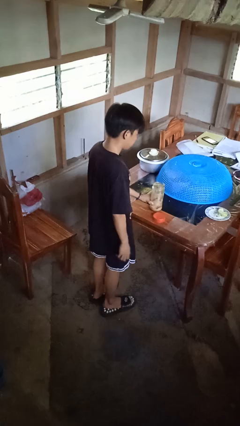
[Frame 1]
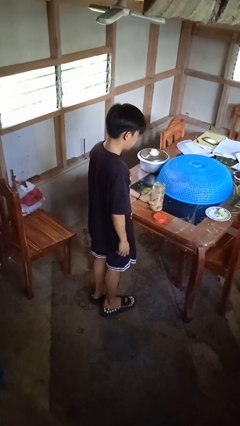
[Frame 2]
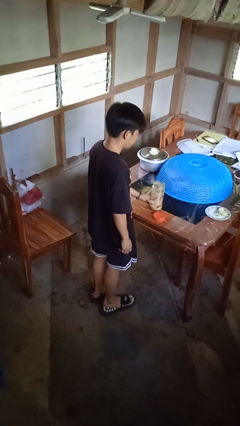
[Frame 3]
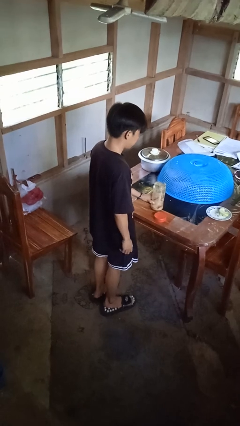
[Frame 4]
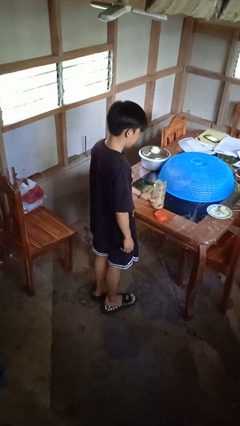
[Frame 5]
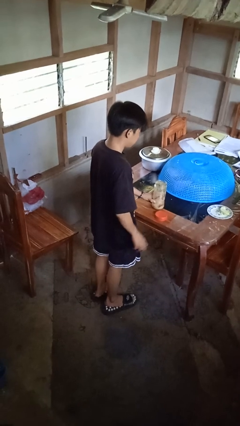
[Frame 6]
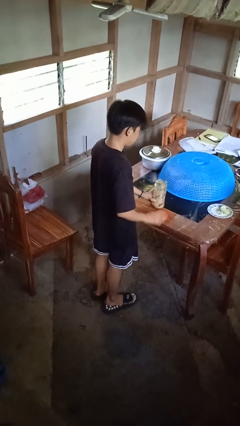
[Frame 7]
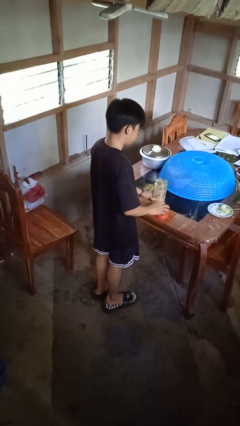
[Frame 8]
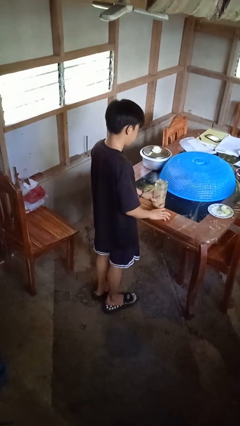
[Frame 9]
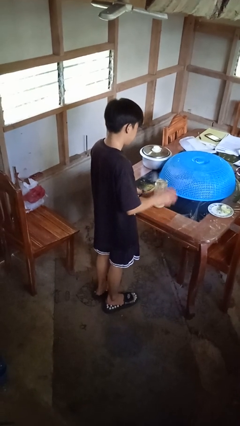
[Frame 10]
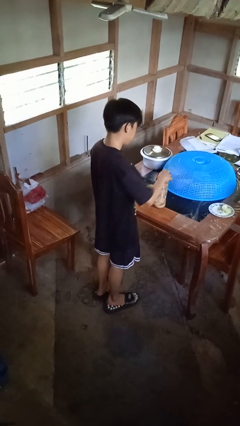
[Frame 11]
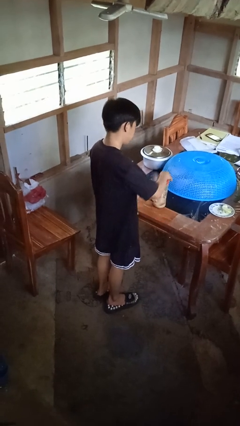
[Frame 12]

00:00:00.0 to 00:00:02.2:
person closes jar

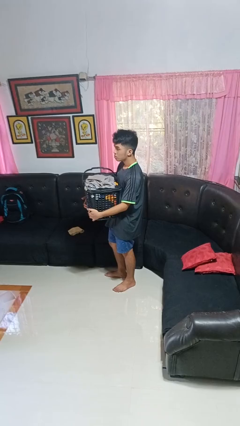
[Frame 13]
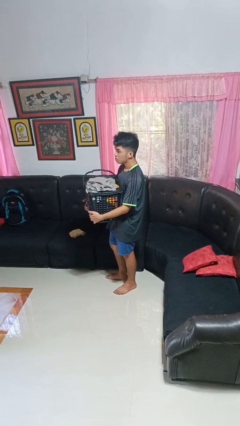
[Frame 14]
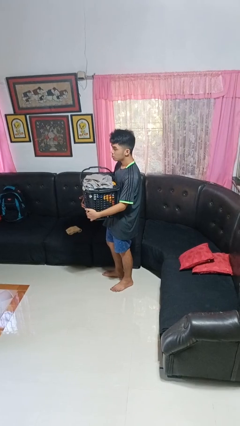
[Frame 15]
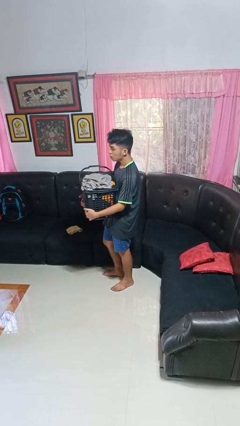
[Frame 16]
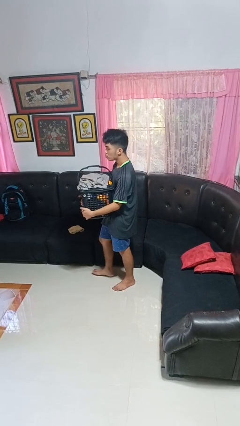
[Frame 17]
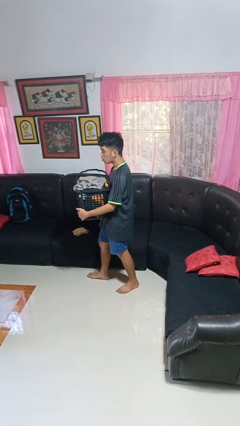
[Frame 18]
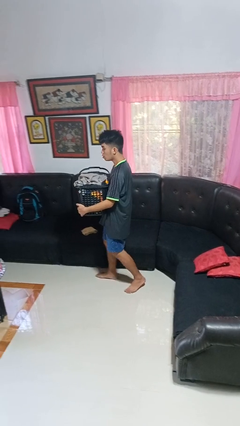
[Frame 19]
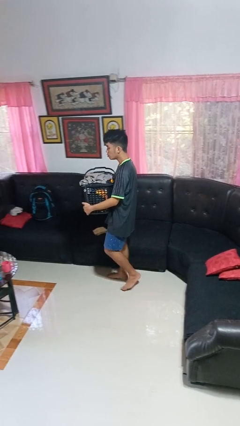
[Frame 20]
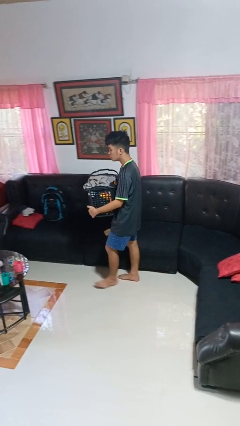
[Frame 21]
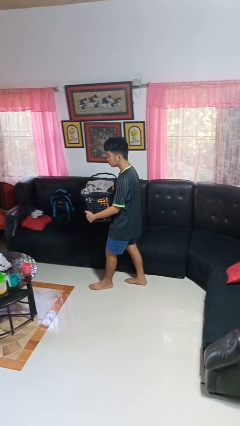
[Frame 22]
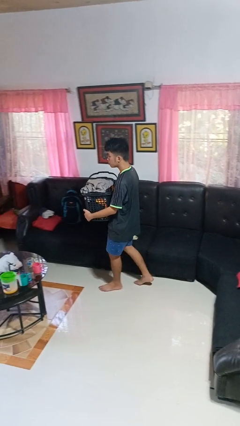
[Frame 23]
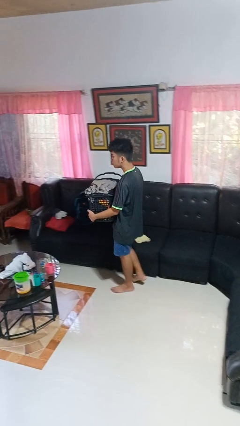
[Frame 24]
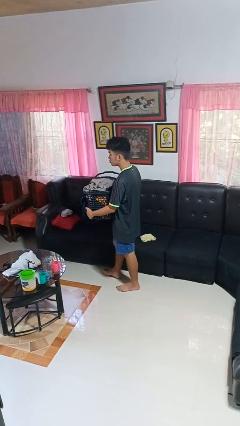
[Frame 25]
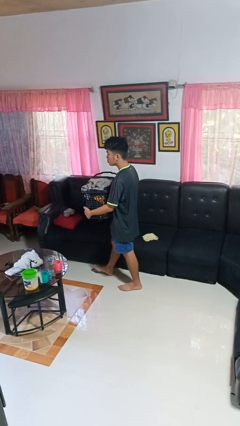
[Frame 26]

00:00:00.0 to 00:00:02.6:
person carries laundry basket

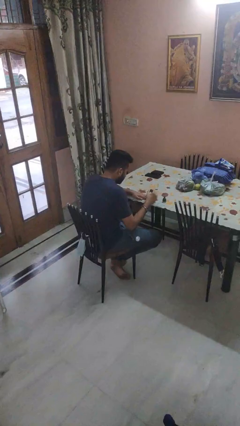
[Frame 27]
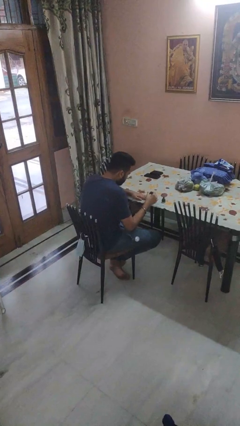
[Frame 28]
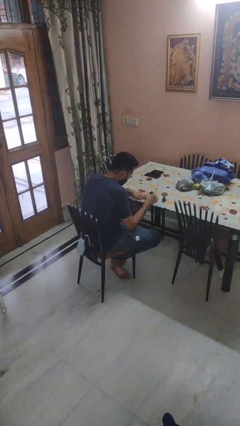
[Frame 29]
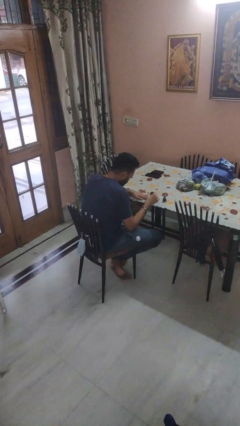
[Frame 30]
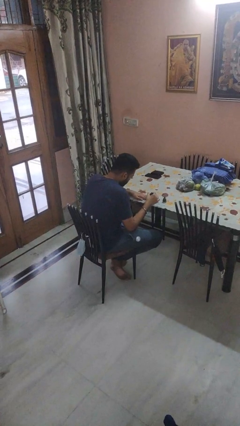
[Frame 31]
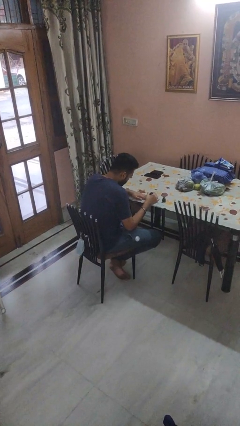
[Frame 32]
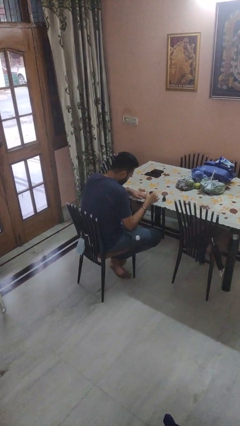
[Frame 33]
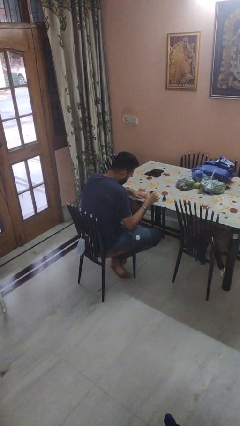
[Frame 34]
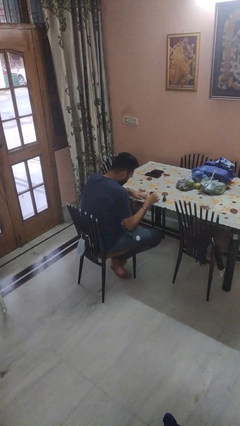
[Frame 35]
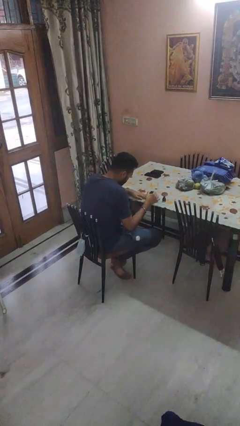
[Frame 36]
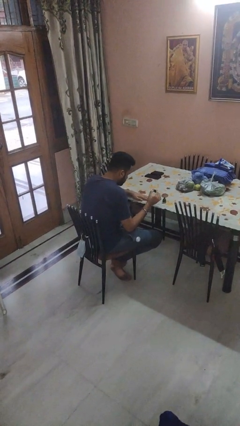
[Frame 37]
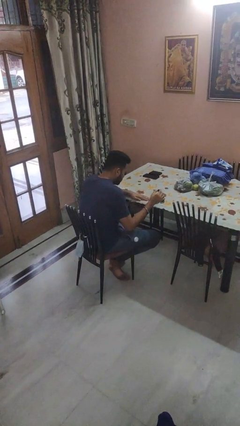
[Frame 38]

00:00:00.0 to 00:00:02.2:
person paints fingernails

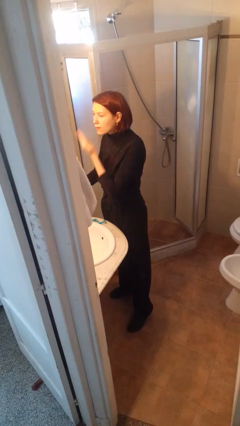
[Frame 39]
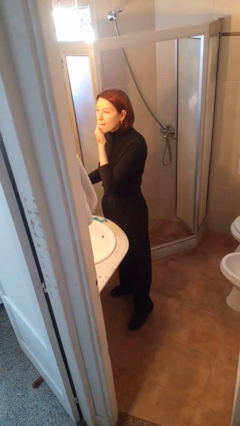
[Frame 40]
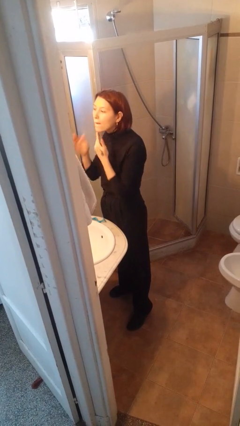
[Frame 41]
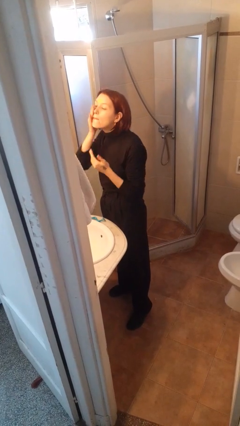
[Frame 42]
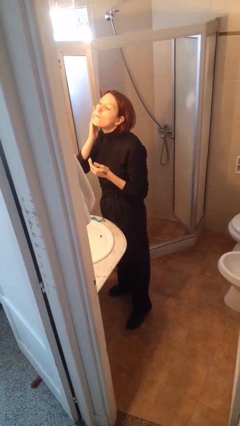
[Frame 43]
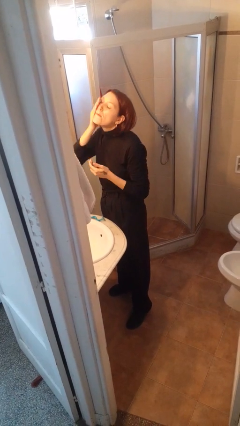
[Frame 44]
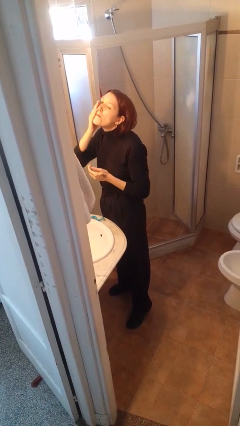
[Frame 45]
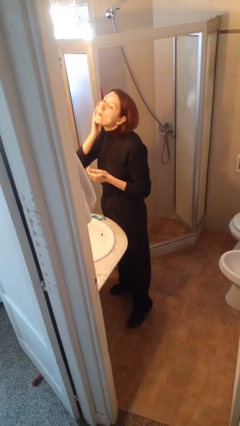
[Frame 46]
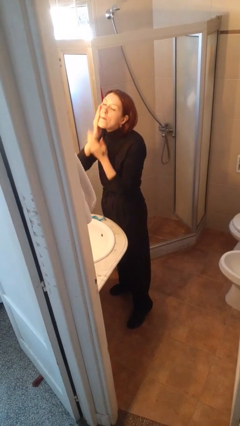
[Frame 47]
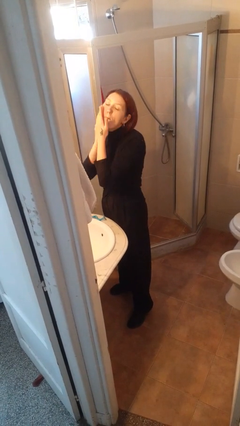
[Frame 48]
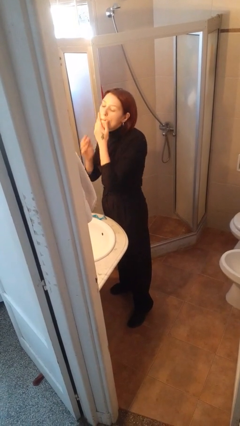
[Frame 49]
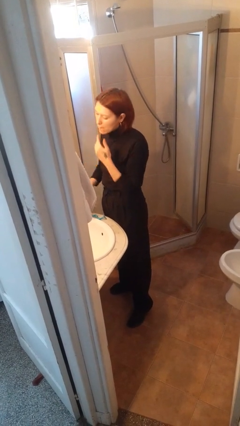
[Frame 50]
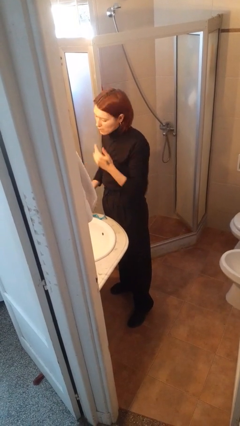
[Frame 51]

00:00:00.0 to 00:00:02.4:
person applies shaving cream

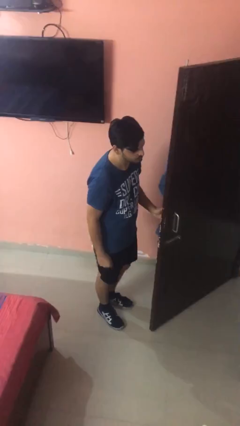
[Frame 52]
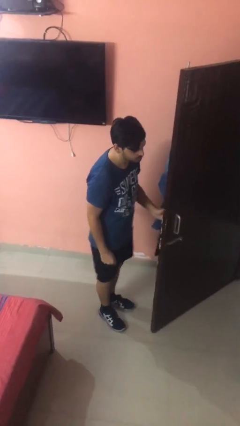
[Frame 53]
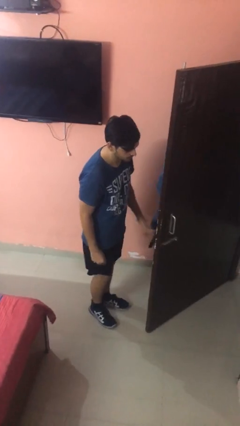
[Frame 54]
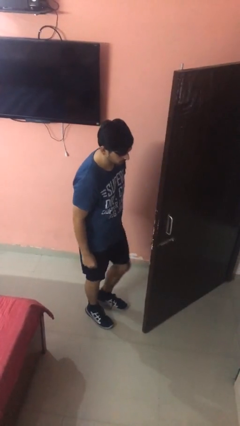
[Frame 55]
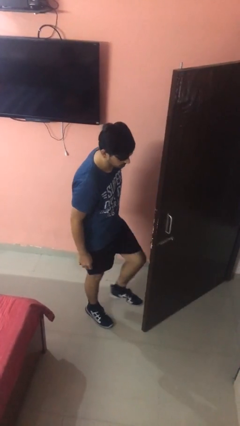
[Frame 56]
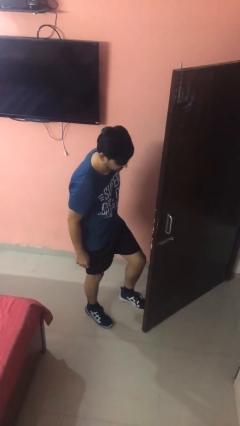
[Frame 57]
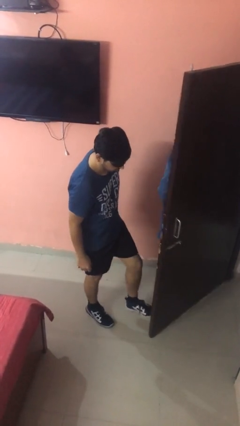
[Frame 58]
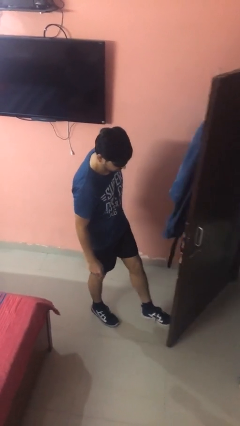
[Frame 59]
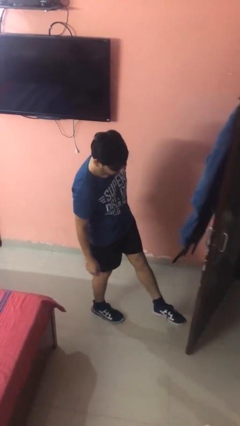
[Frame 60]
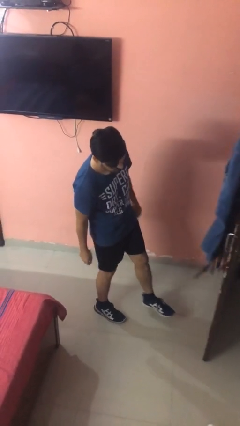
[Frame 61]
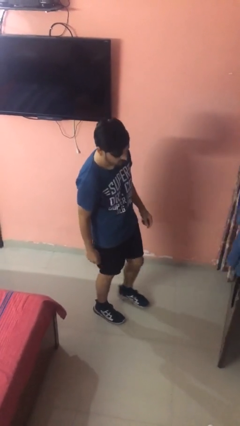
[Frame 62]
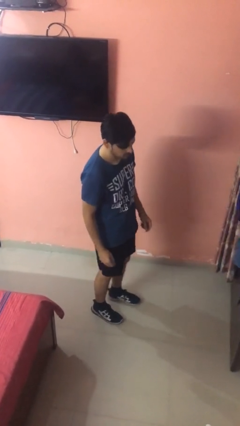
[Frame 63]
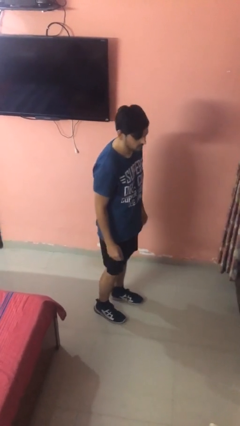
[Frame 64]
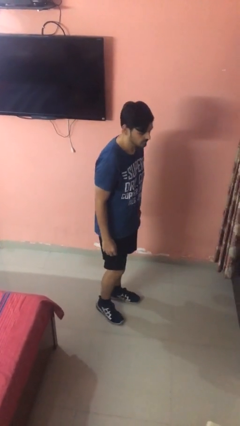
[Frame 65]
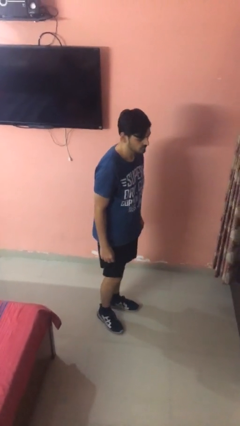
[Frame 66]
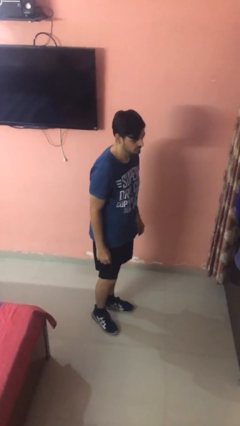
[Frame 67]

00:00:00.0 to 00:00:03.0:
person closes door with foot

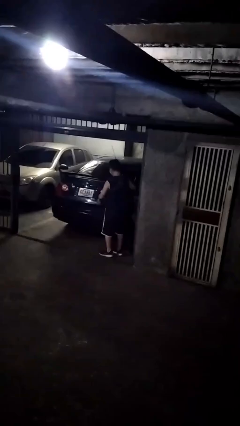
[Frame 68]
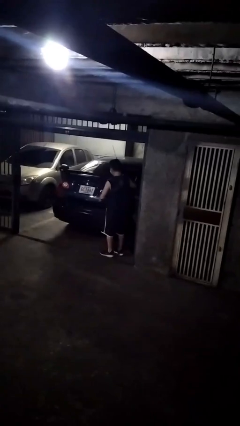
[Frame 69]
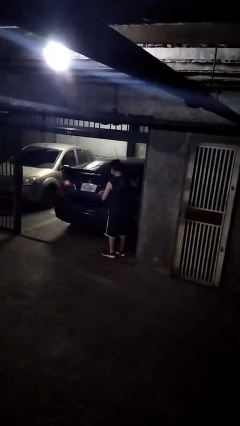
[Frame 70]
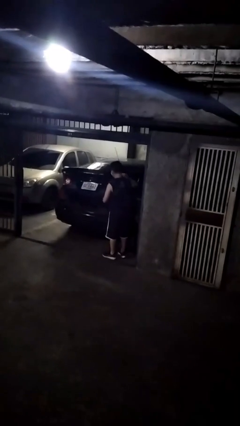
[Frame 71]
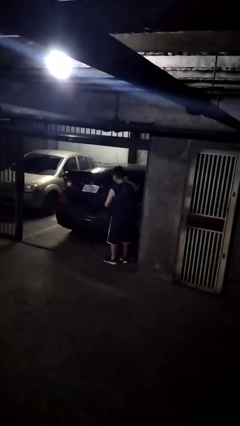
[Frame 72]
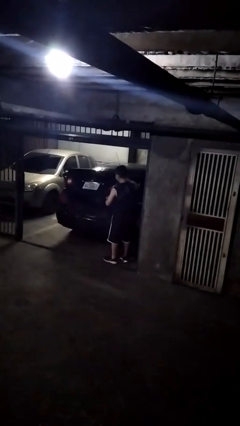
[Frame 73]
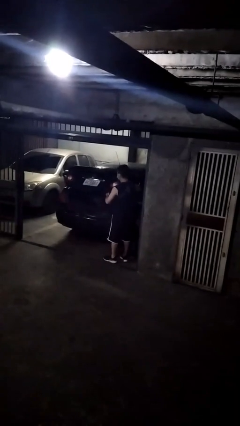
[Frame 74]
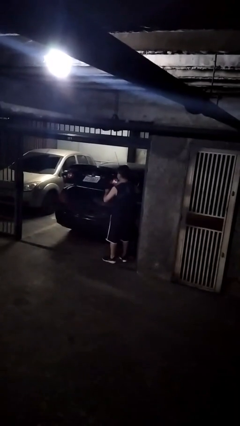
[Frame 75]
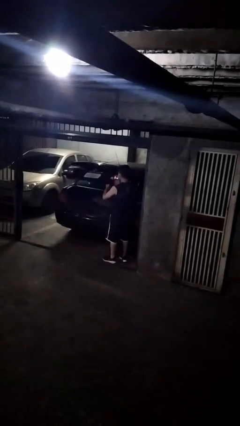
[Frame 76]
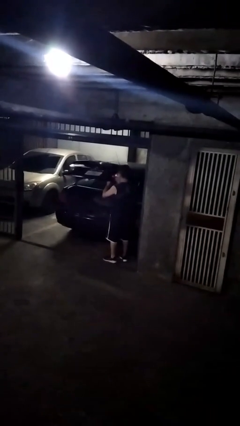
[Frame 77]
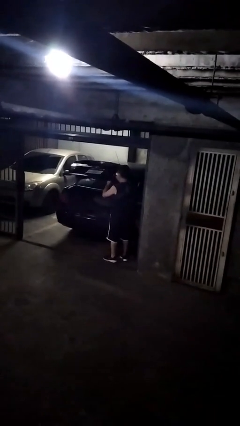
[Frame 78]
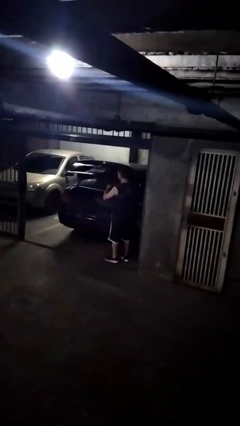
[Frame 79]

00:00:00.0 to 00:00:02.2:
person opens car trunk

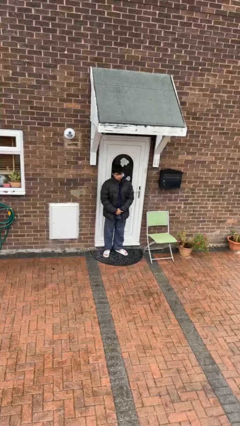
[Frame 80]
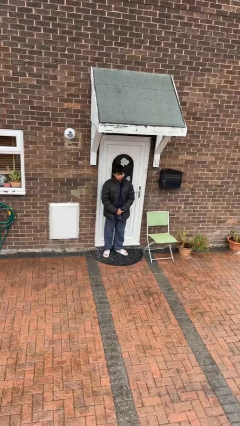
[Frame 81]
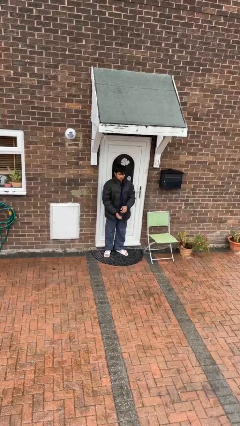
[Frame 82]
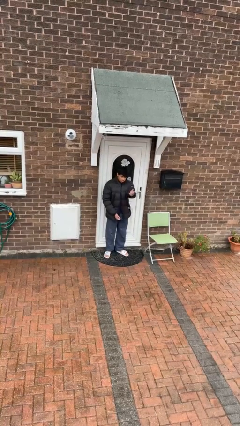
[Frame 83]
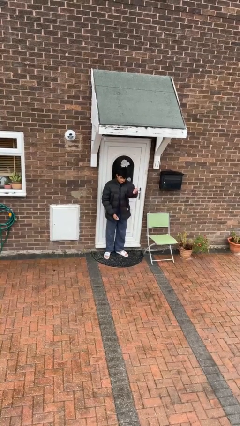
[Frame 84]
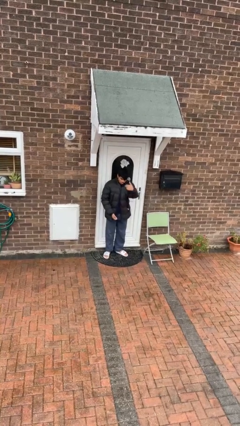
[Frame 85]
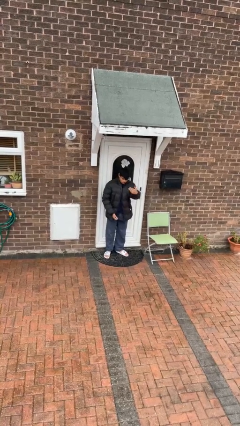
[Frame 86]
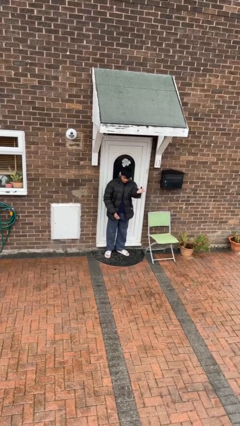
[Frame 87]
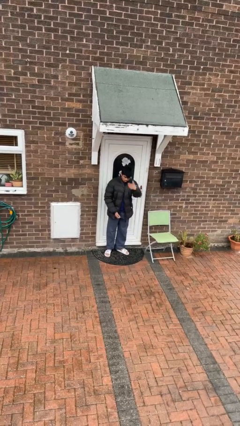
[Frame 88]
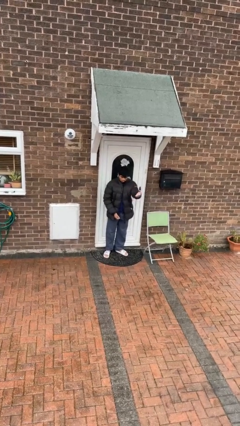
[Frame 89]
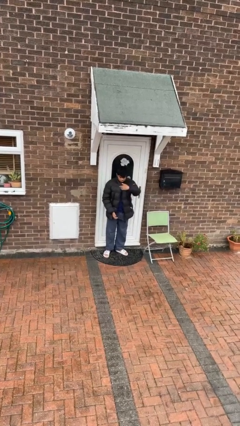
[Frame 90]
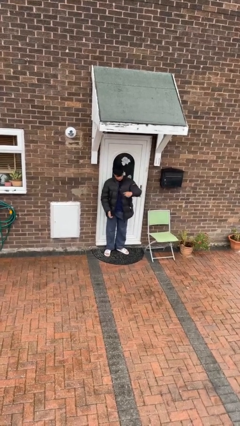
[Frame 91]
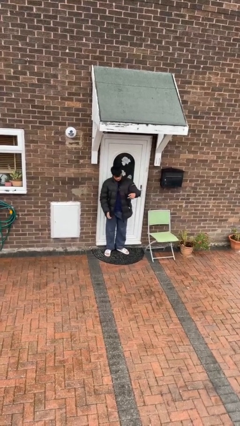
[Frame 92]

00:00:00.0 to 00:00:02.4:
person gestures come here

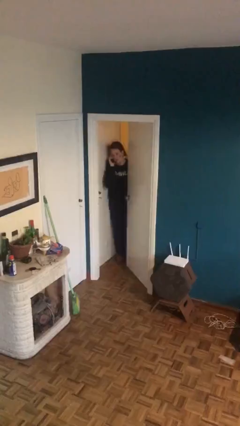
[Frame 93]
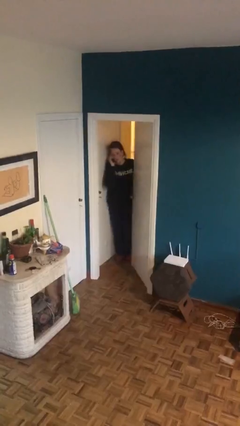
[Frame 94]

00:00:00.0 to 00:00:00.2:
person opens facility door
